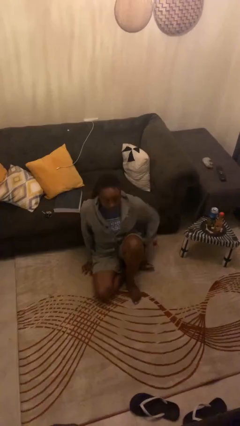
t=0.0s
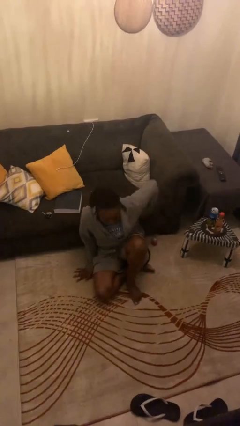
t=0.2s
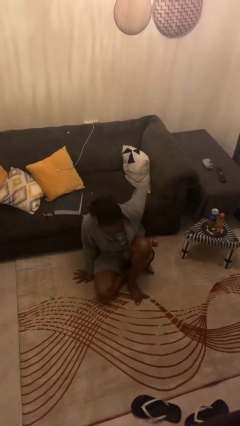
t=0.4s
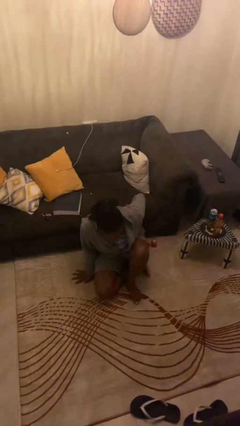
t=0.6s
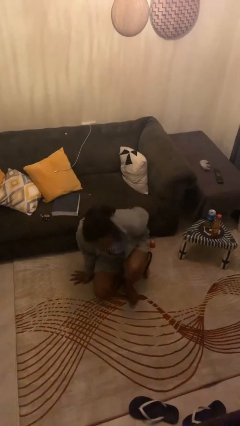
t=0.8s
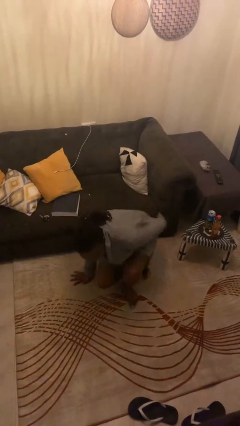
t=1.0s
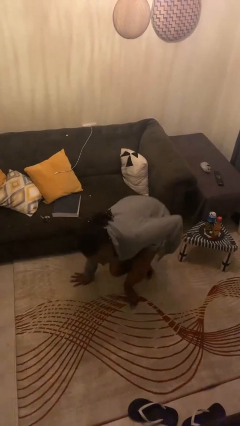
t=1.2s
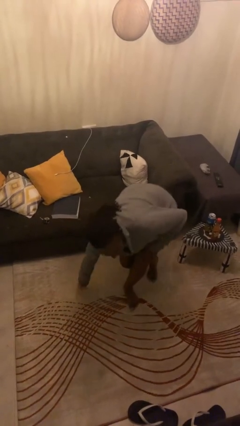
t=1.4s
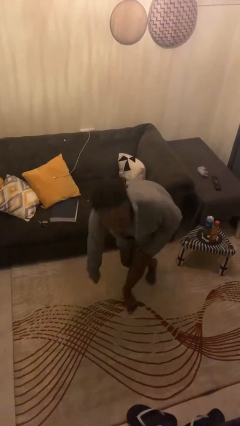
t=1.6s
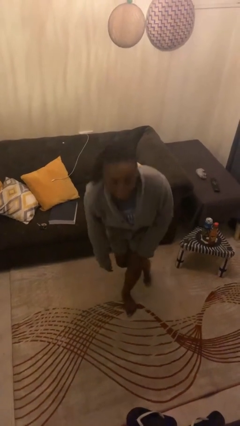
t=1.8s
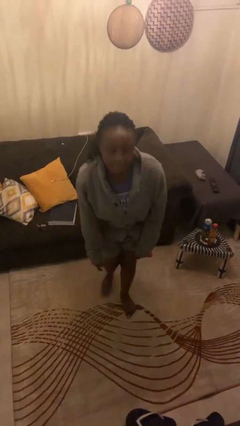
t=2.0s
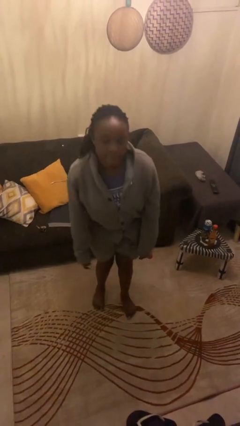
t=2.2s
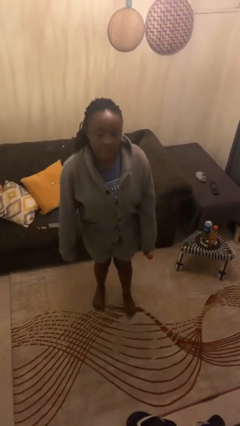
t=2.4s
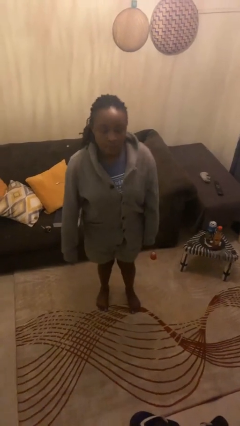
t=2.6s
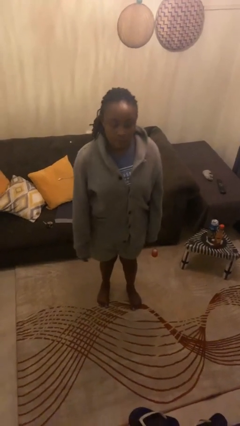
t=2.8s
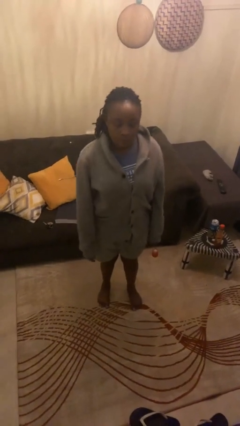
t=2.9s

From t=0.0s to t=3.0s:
person stands up from floor

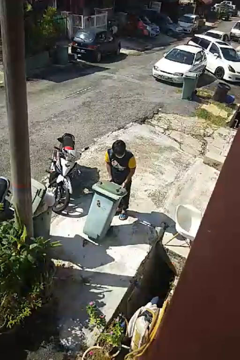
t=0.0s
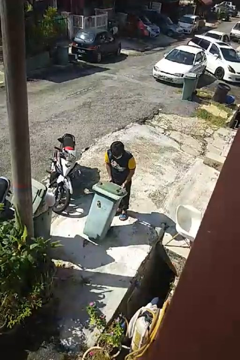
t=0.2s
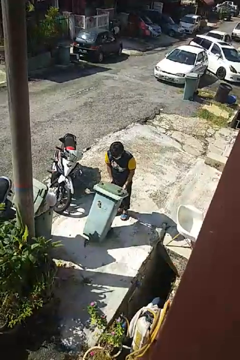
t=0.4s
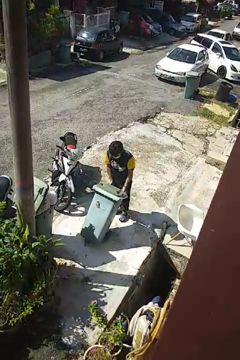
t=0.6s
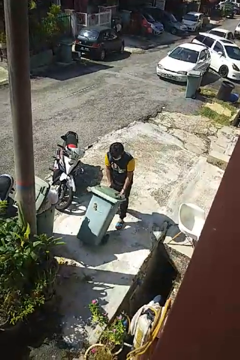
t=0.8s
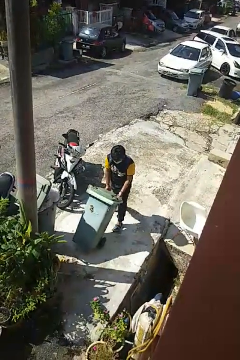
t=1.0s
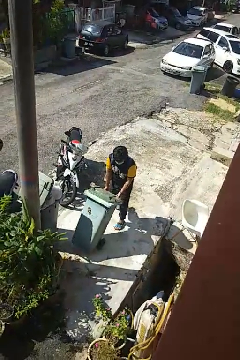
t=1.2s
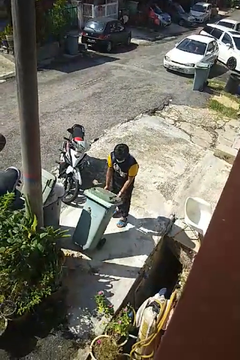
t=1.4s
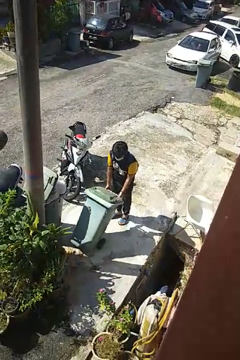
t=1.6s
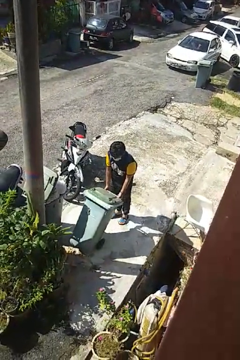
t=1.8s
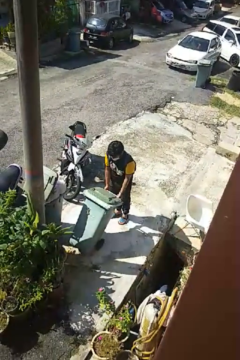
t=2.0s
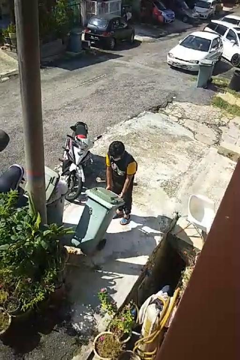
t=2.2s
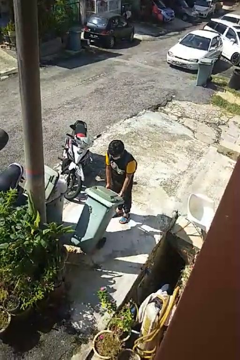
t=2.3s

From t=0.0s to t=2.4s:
person pushes wheeled trashcan

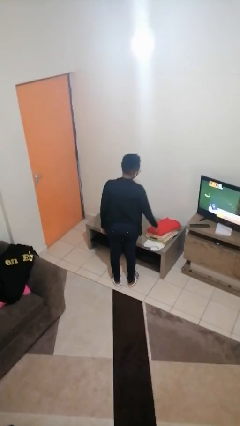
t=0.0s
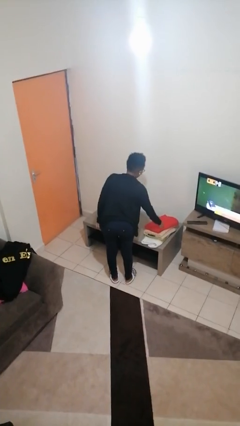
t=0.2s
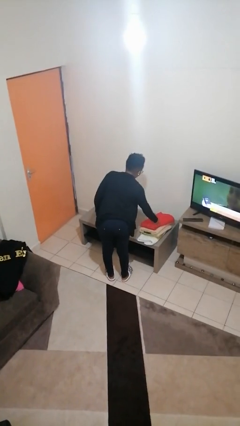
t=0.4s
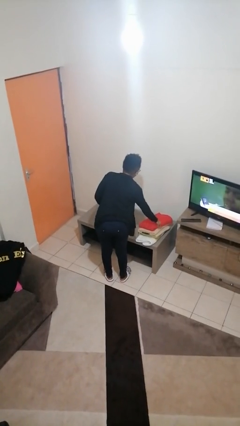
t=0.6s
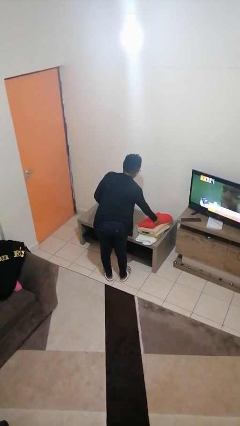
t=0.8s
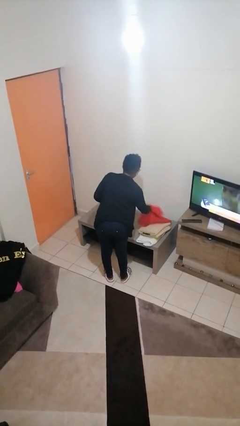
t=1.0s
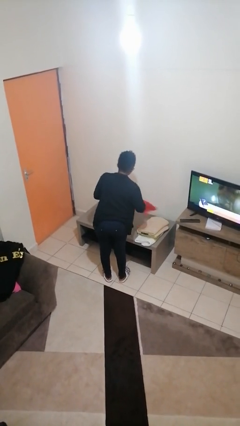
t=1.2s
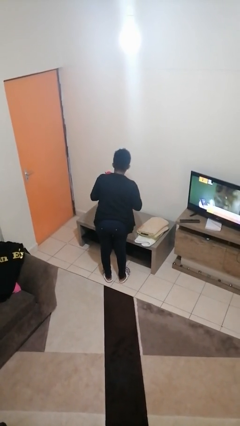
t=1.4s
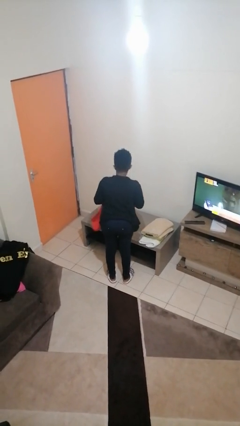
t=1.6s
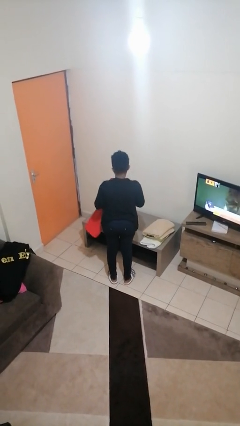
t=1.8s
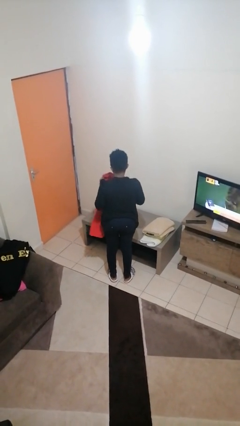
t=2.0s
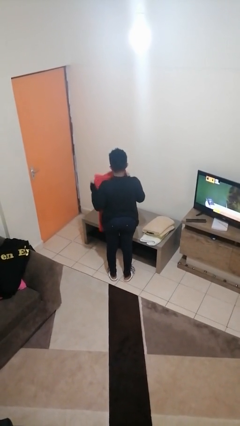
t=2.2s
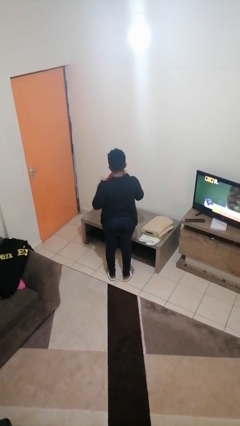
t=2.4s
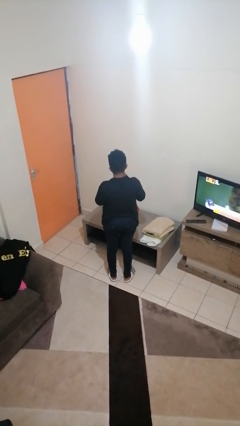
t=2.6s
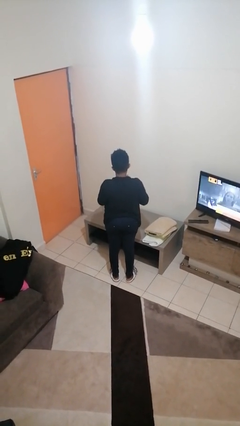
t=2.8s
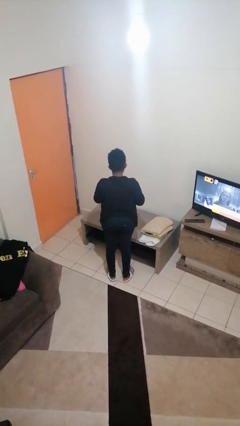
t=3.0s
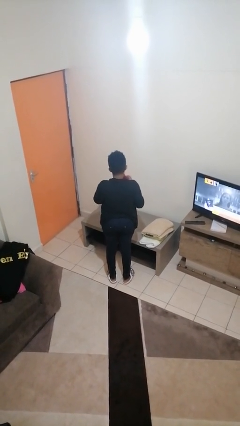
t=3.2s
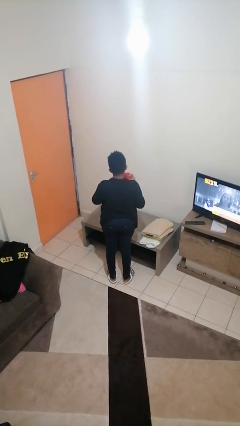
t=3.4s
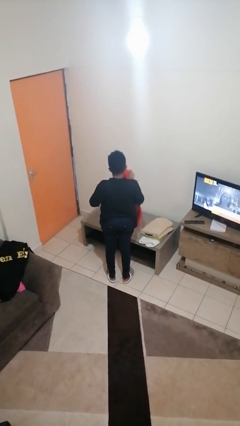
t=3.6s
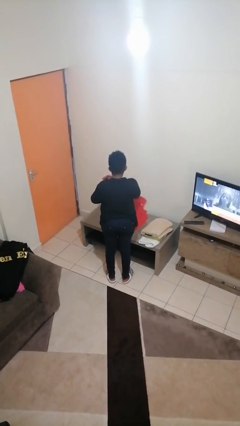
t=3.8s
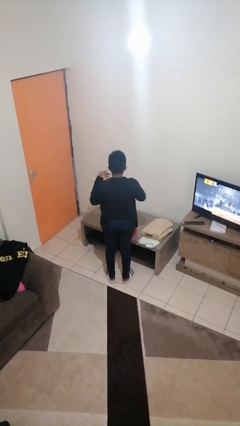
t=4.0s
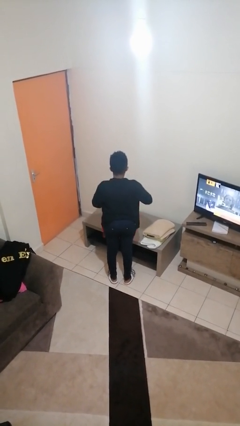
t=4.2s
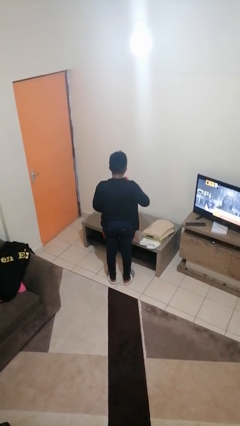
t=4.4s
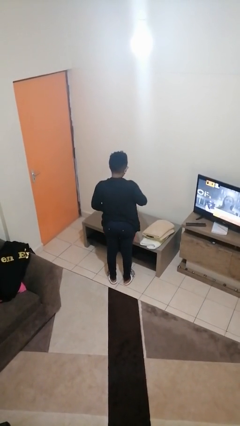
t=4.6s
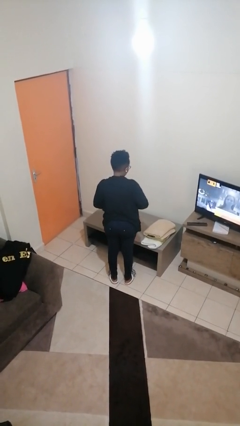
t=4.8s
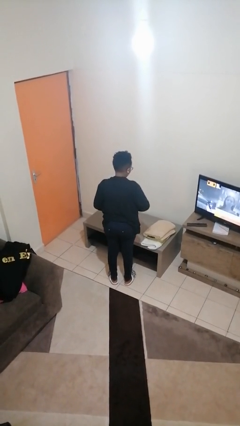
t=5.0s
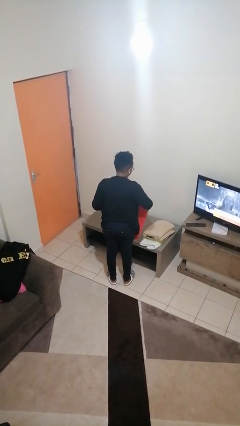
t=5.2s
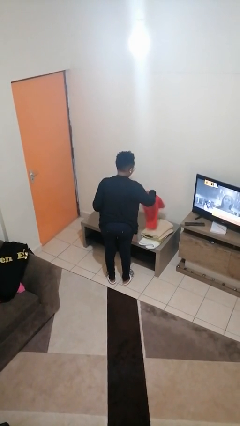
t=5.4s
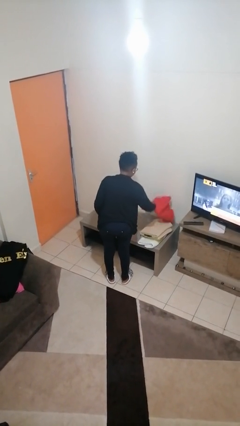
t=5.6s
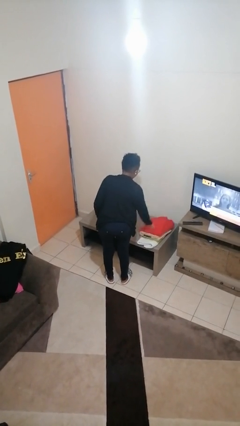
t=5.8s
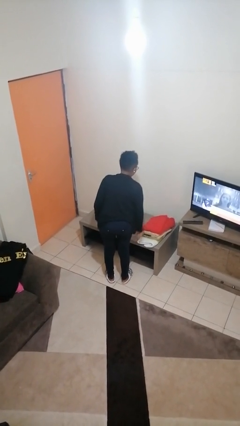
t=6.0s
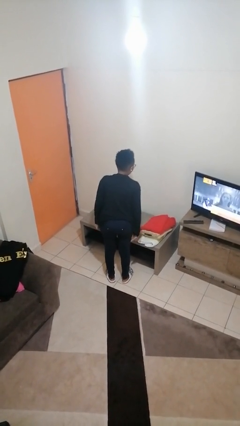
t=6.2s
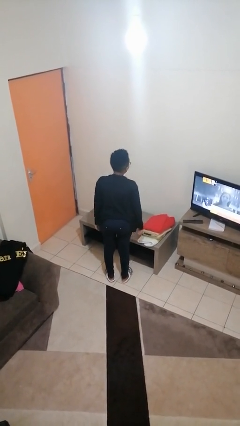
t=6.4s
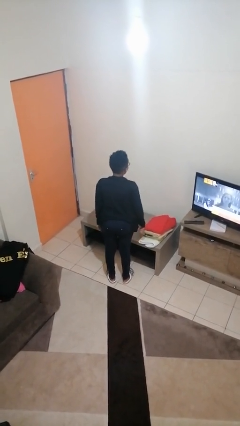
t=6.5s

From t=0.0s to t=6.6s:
person folds towel

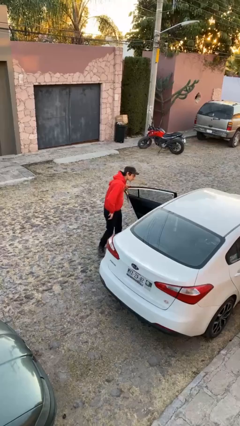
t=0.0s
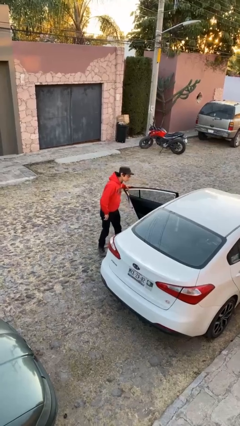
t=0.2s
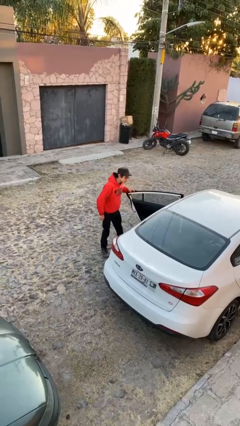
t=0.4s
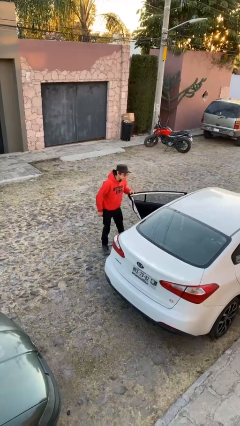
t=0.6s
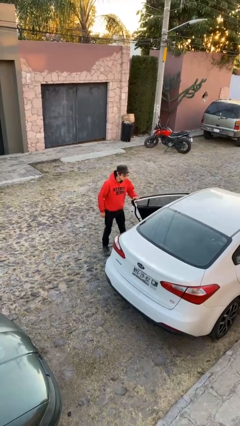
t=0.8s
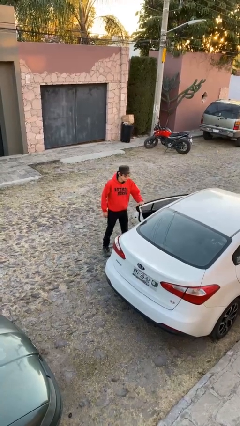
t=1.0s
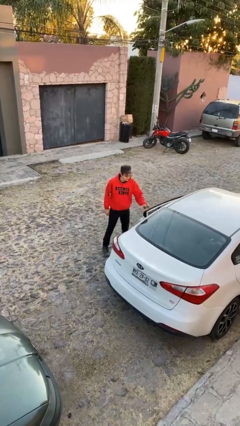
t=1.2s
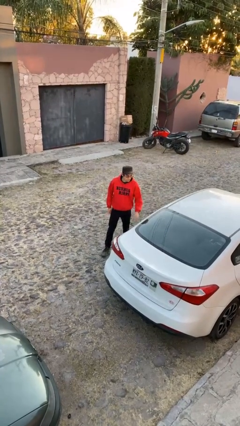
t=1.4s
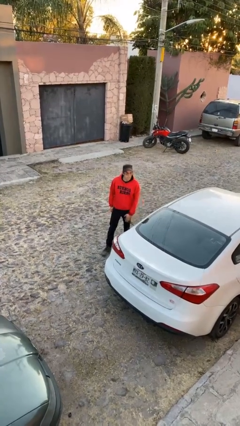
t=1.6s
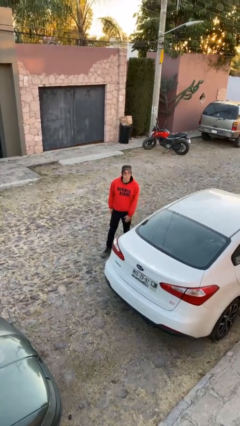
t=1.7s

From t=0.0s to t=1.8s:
person closes car door

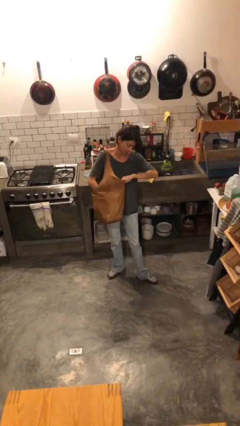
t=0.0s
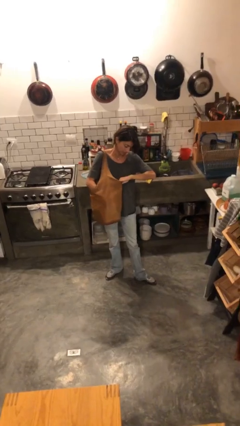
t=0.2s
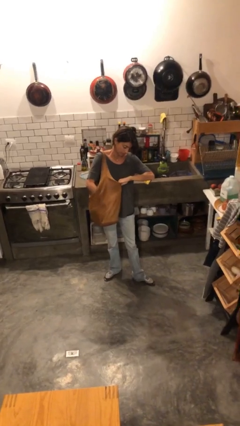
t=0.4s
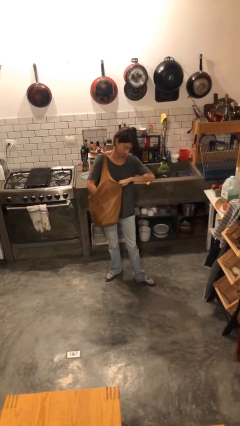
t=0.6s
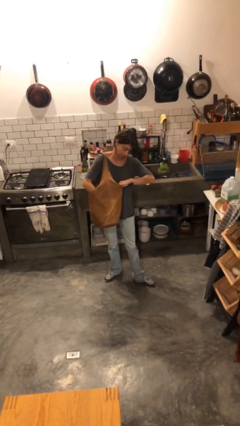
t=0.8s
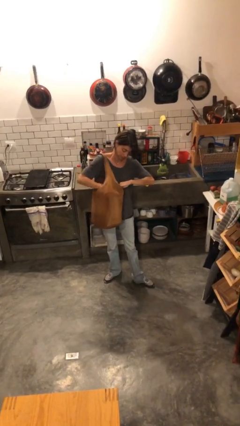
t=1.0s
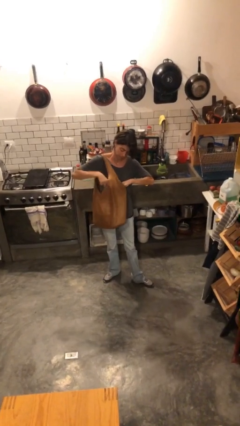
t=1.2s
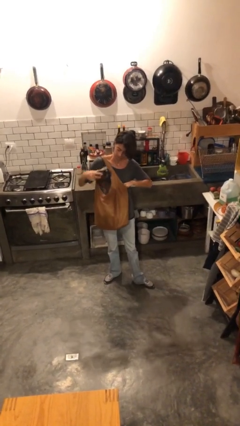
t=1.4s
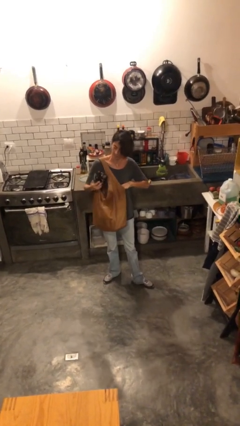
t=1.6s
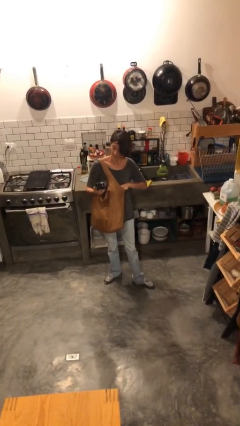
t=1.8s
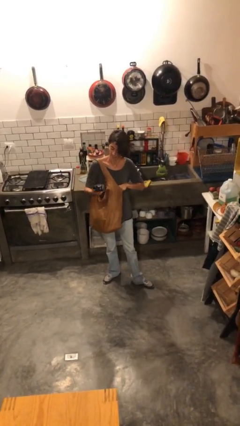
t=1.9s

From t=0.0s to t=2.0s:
person takes object from purse

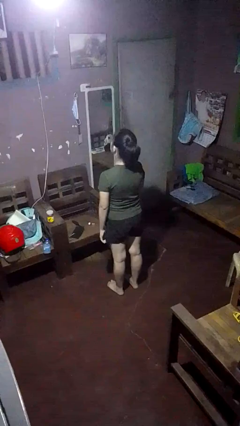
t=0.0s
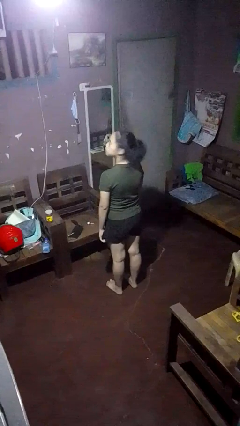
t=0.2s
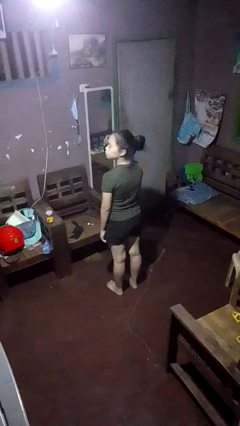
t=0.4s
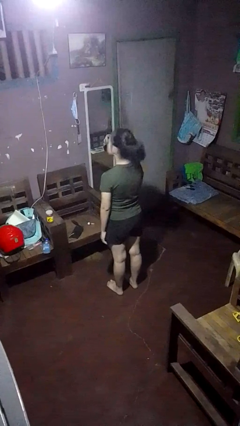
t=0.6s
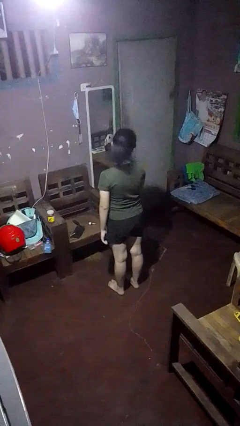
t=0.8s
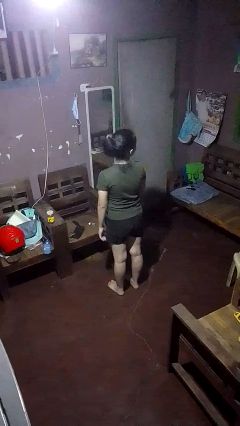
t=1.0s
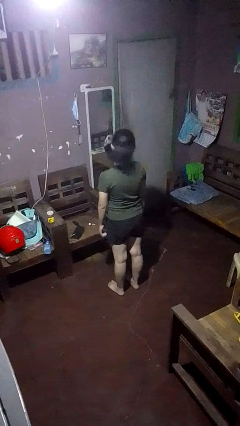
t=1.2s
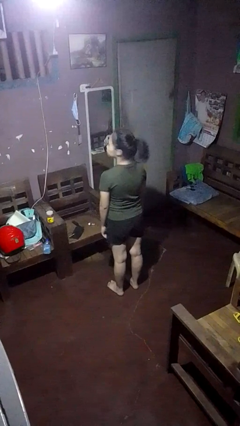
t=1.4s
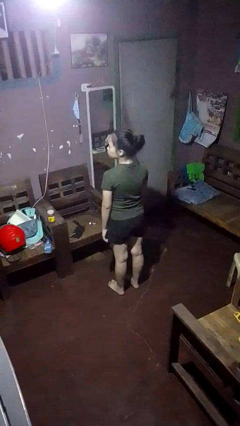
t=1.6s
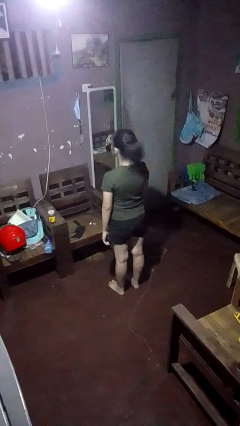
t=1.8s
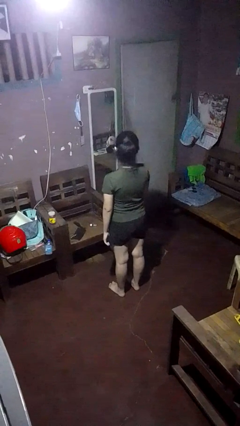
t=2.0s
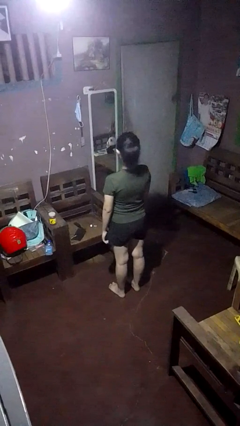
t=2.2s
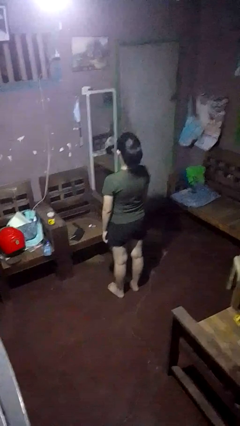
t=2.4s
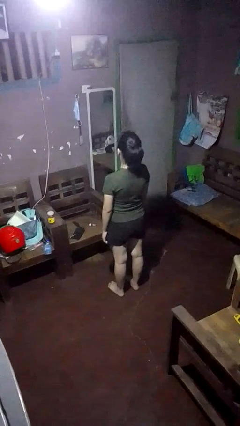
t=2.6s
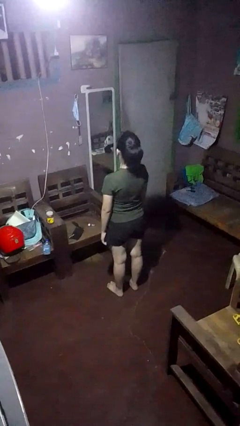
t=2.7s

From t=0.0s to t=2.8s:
person shakes head
